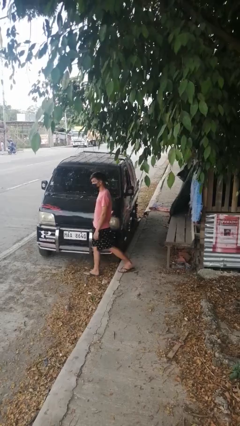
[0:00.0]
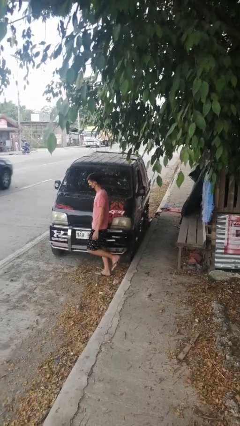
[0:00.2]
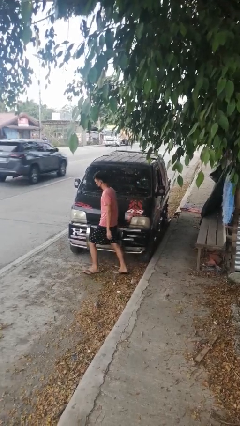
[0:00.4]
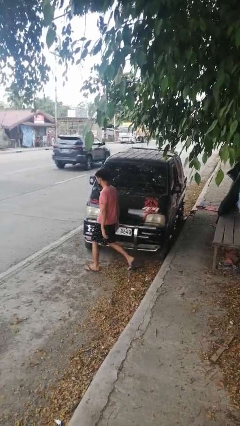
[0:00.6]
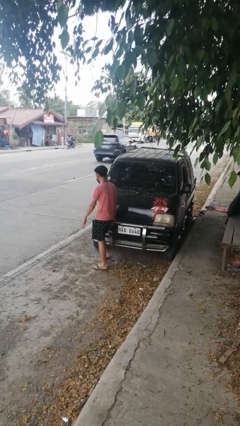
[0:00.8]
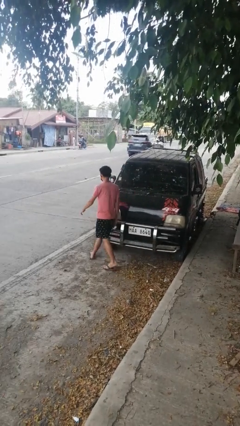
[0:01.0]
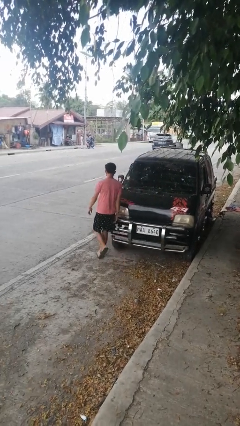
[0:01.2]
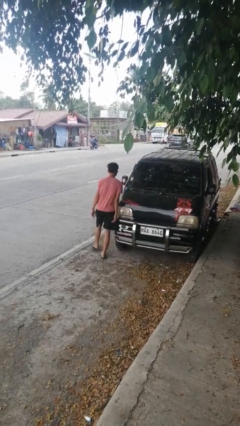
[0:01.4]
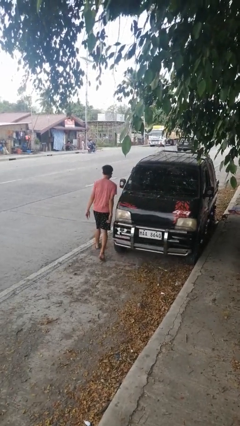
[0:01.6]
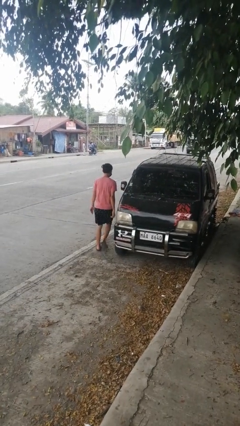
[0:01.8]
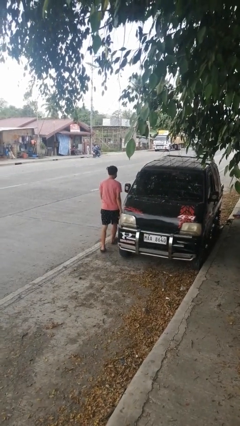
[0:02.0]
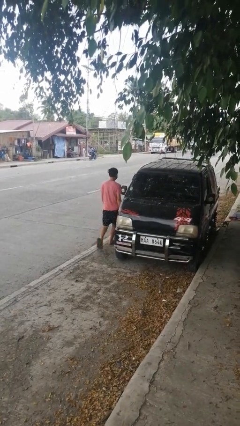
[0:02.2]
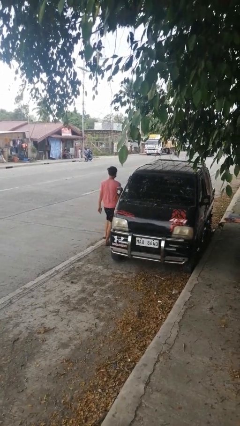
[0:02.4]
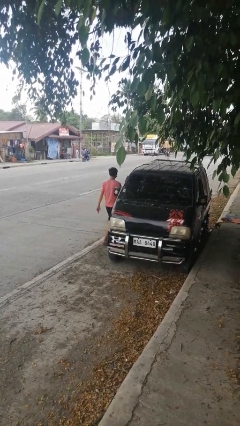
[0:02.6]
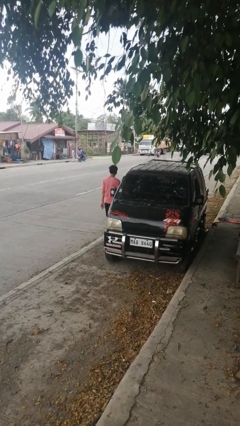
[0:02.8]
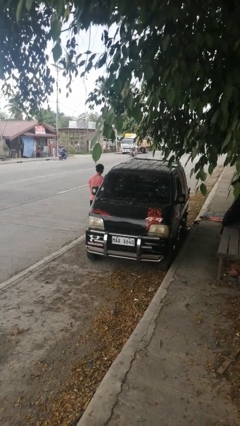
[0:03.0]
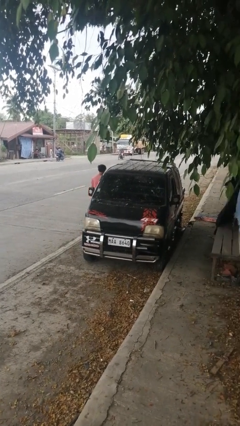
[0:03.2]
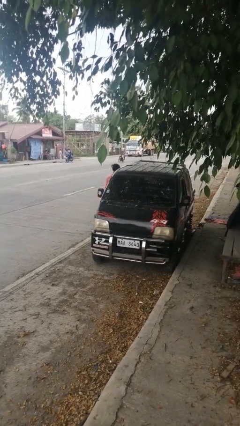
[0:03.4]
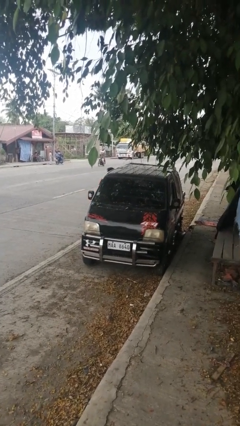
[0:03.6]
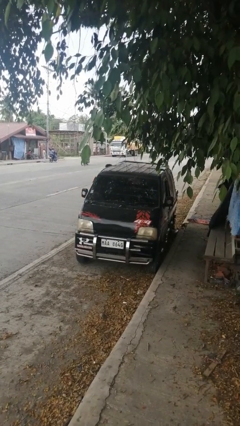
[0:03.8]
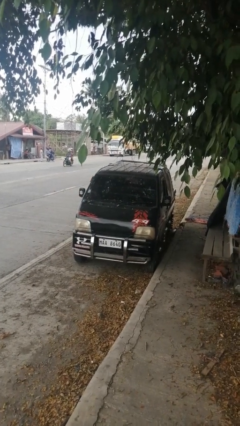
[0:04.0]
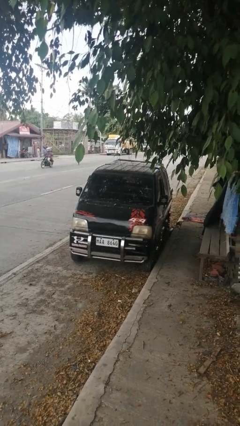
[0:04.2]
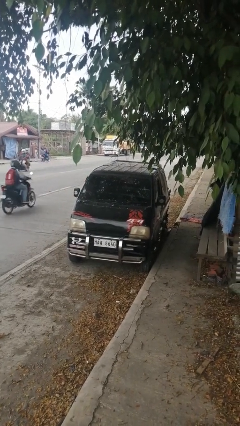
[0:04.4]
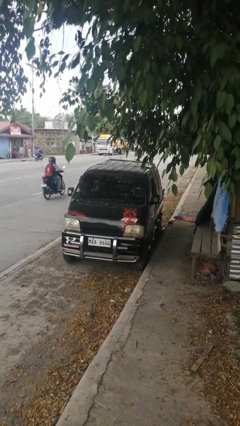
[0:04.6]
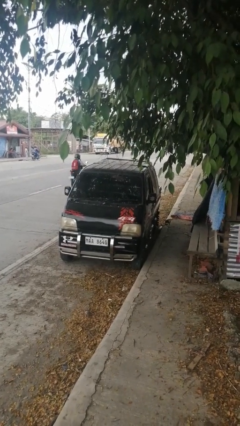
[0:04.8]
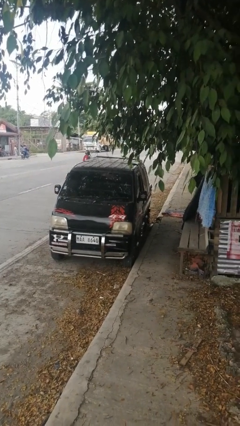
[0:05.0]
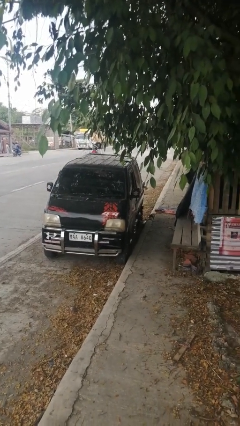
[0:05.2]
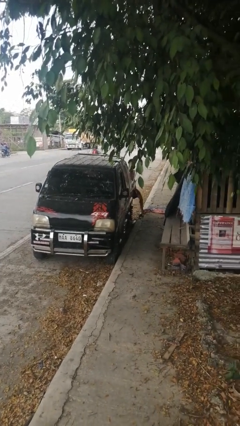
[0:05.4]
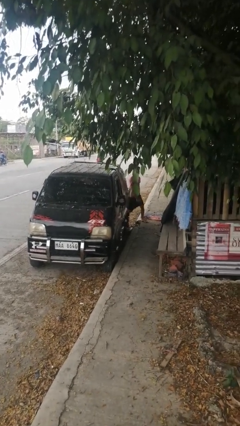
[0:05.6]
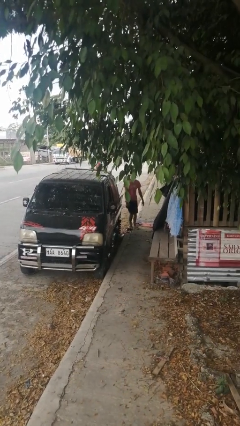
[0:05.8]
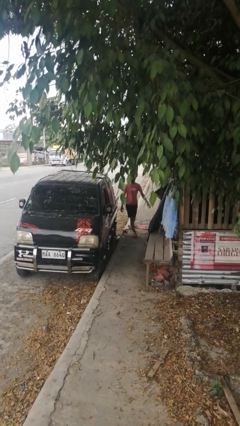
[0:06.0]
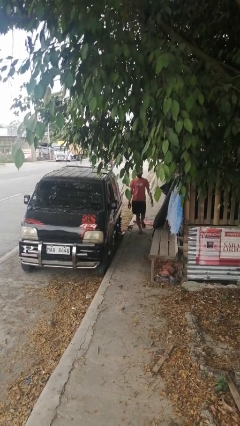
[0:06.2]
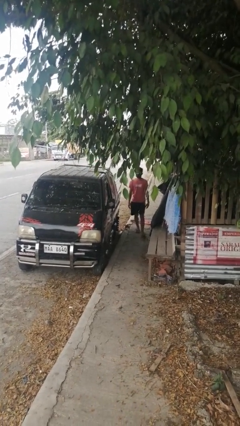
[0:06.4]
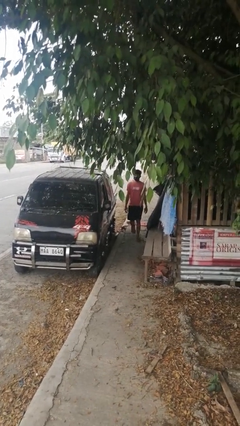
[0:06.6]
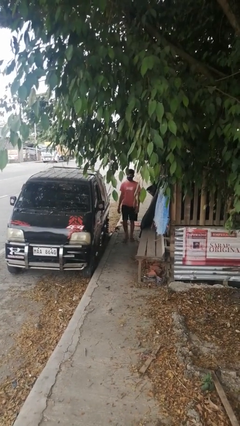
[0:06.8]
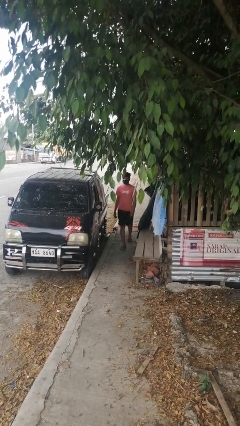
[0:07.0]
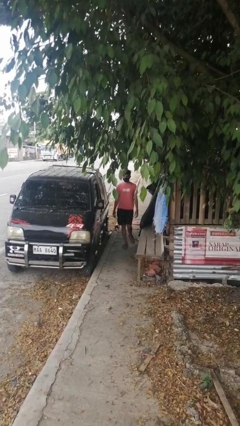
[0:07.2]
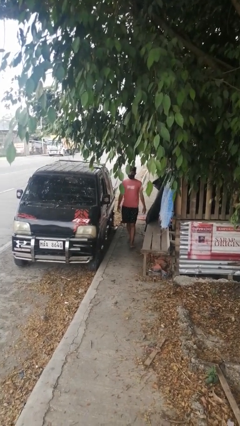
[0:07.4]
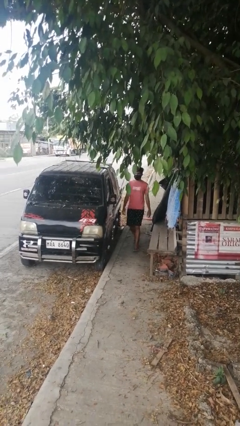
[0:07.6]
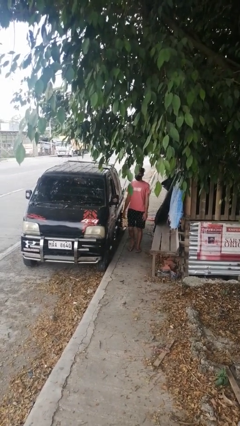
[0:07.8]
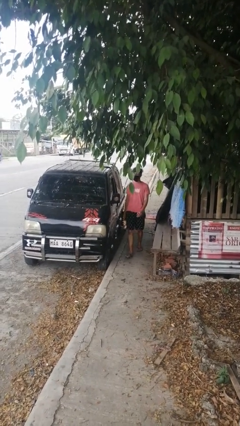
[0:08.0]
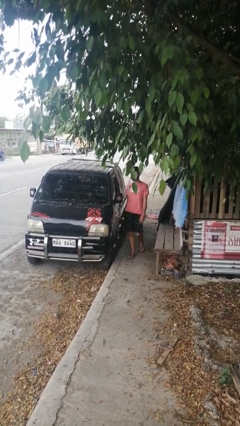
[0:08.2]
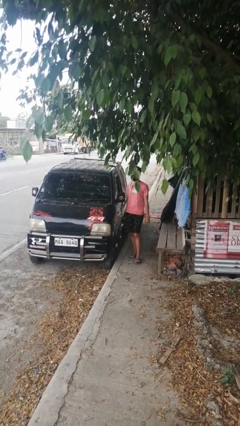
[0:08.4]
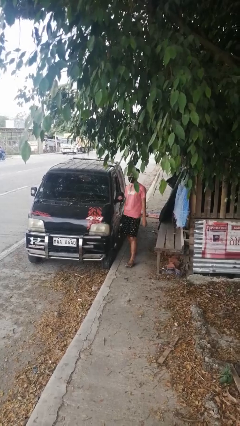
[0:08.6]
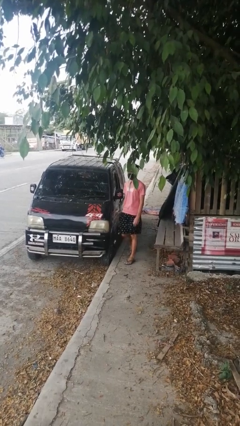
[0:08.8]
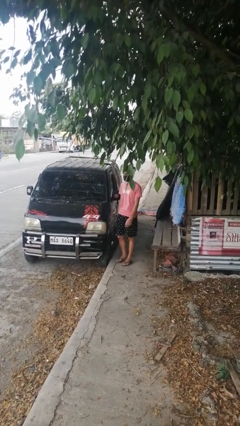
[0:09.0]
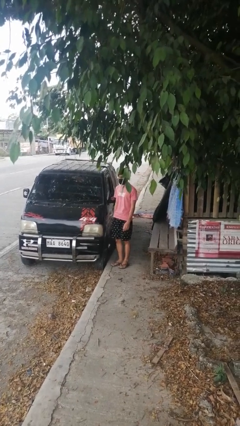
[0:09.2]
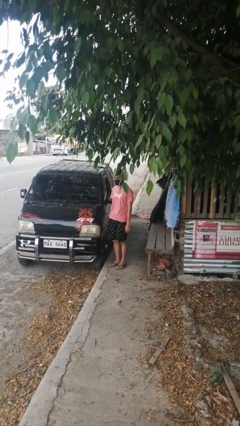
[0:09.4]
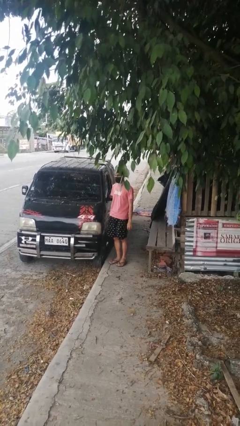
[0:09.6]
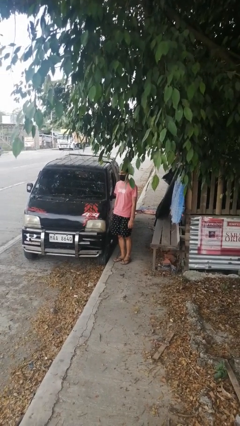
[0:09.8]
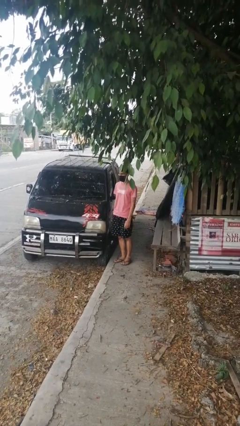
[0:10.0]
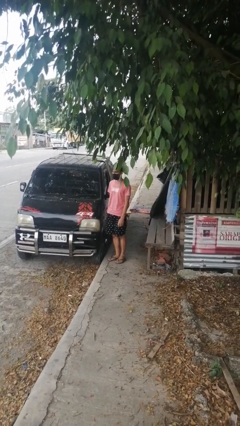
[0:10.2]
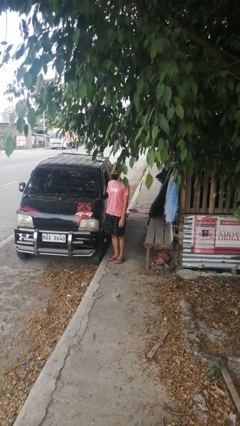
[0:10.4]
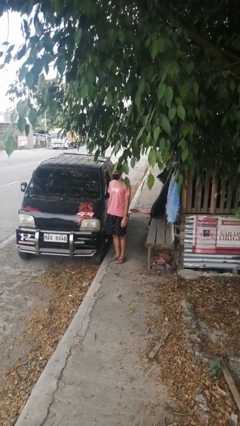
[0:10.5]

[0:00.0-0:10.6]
person walks around car

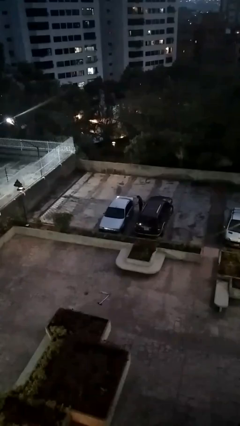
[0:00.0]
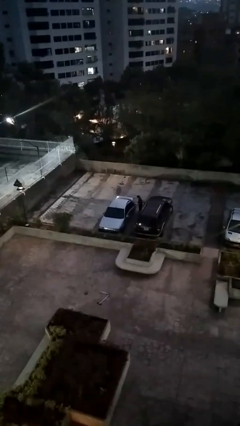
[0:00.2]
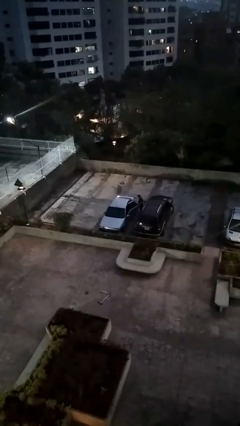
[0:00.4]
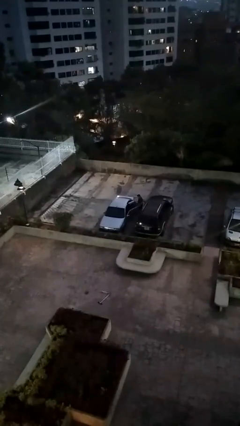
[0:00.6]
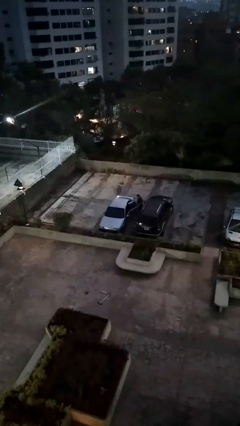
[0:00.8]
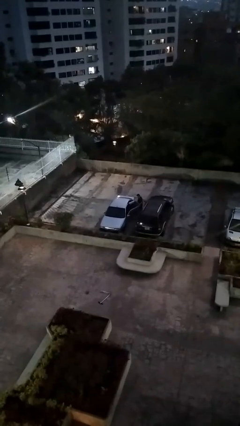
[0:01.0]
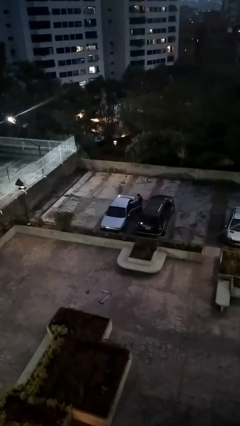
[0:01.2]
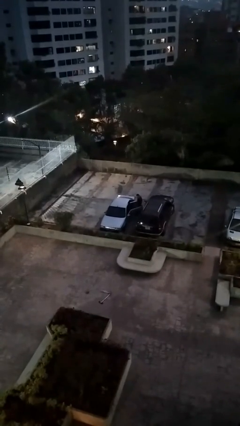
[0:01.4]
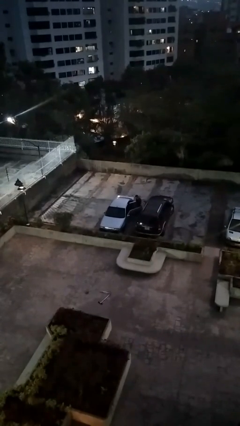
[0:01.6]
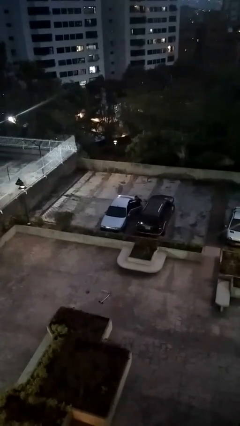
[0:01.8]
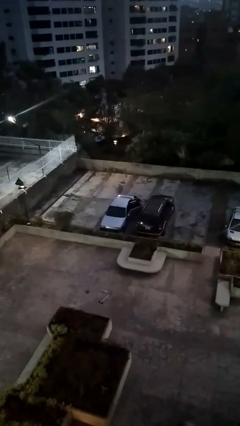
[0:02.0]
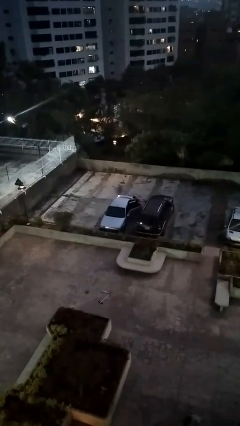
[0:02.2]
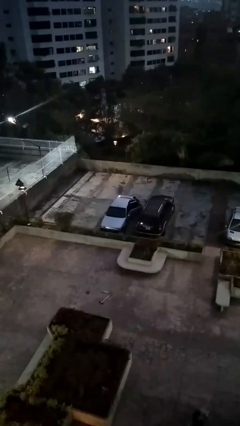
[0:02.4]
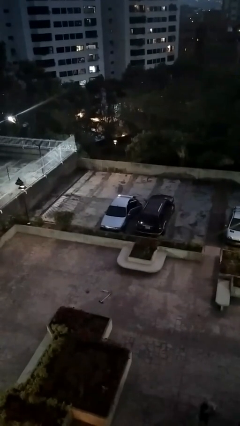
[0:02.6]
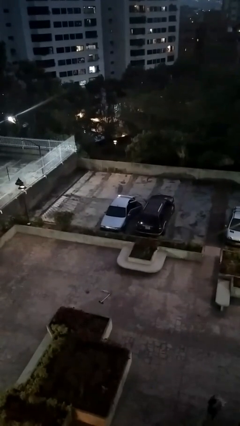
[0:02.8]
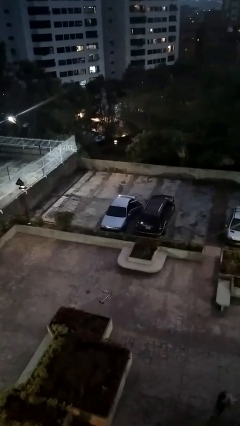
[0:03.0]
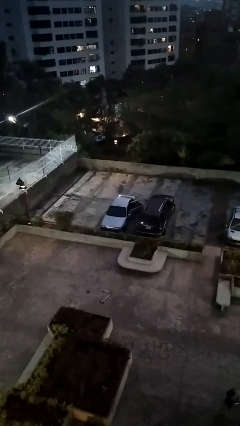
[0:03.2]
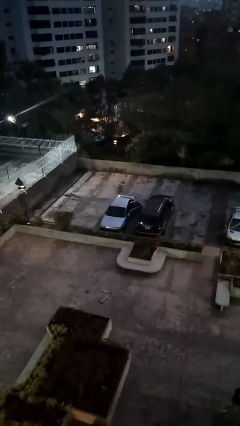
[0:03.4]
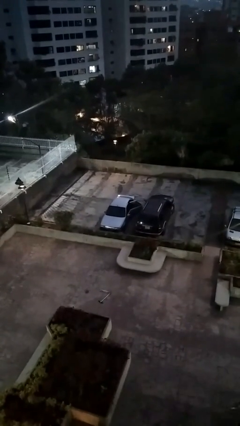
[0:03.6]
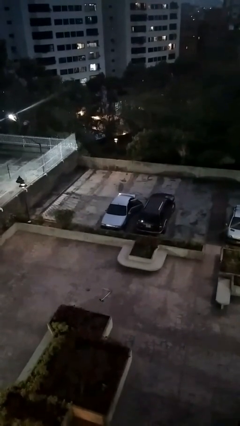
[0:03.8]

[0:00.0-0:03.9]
car picks up person

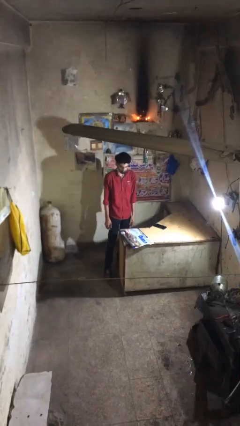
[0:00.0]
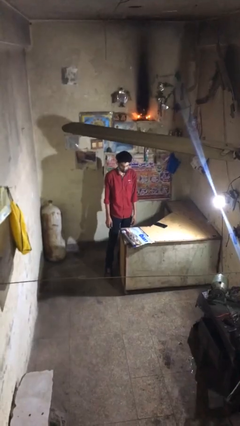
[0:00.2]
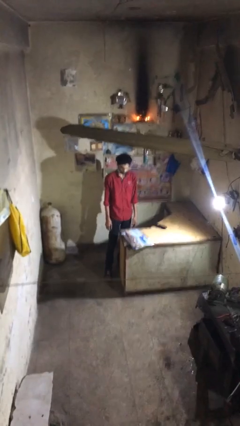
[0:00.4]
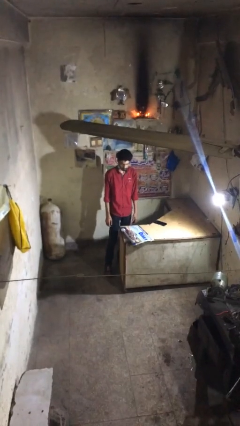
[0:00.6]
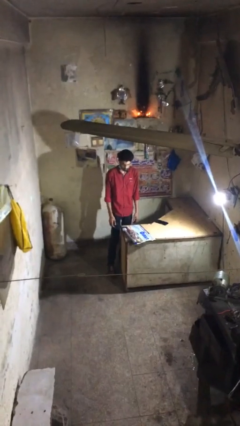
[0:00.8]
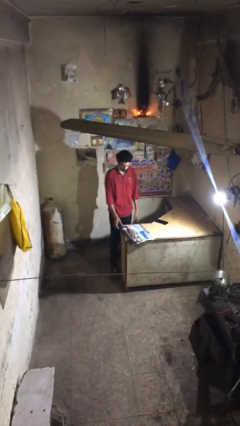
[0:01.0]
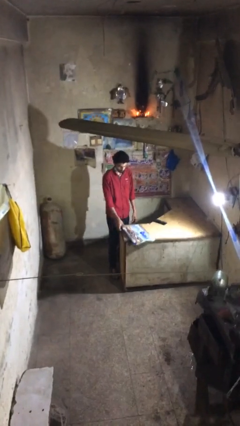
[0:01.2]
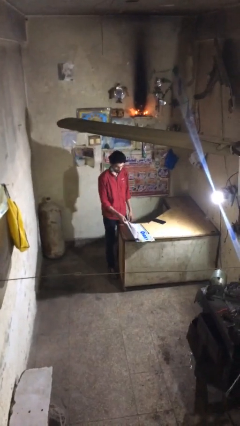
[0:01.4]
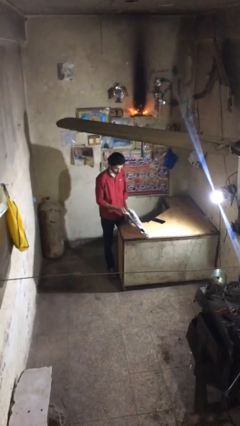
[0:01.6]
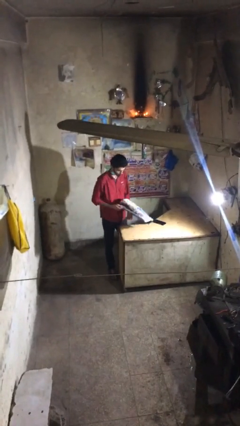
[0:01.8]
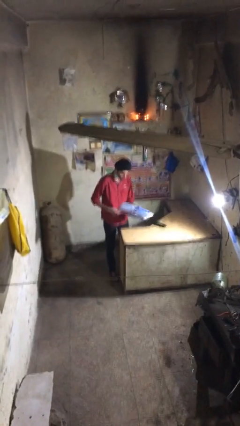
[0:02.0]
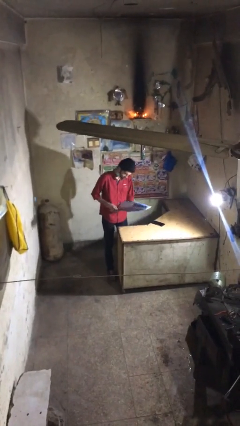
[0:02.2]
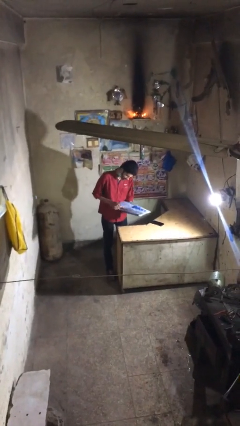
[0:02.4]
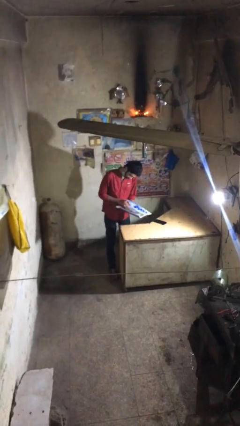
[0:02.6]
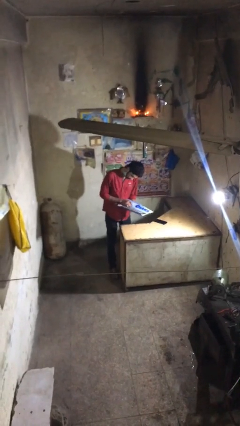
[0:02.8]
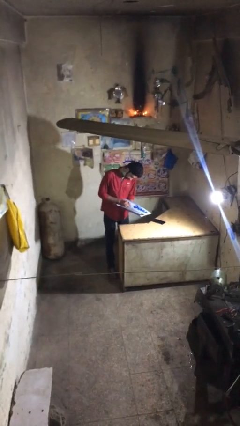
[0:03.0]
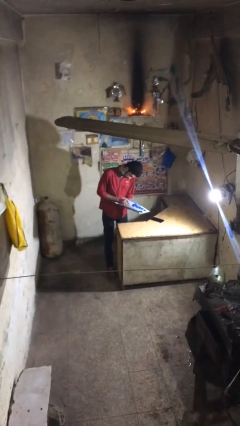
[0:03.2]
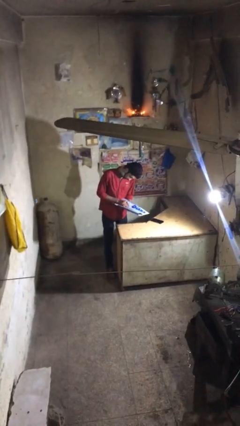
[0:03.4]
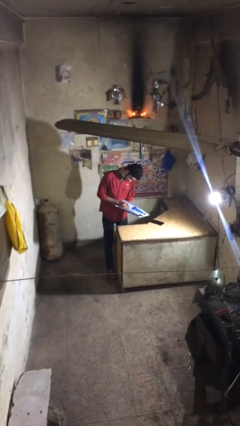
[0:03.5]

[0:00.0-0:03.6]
person picks up object from table

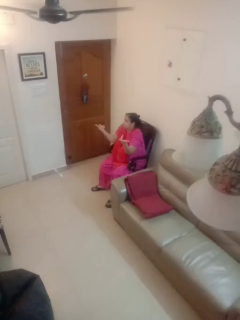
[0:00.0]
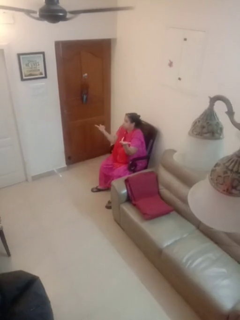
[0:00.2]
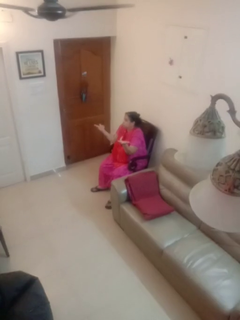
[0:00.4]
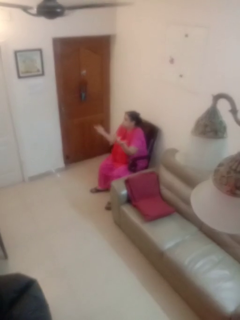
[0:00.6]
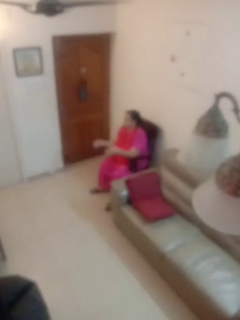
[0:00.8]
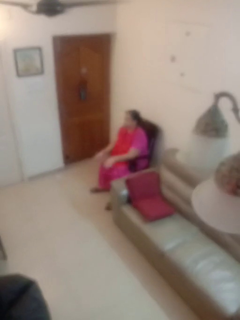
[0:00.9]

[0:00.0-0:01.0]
person shrugs
